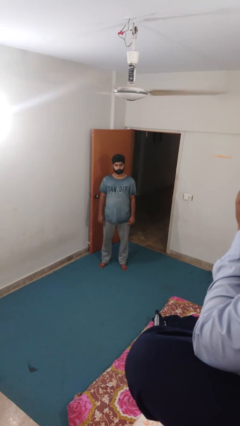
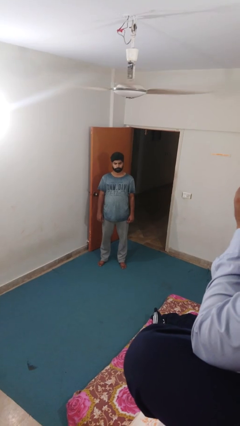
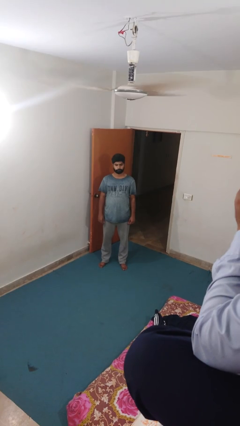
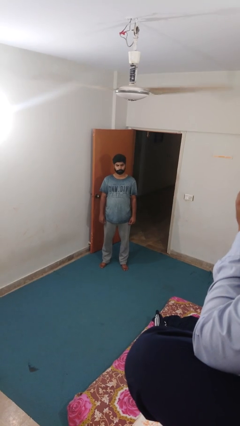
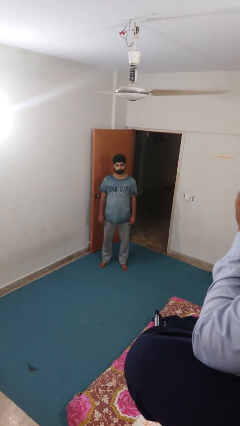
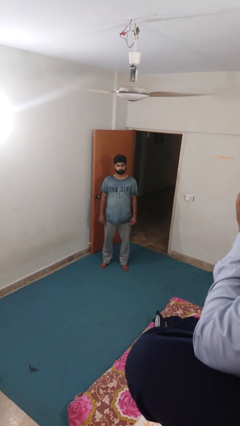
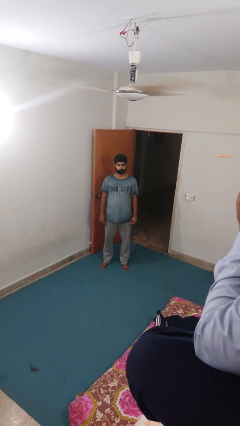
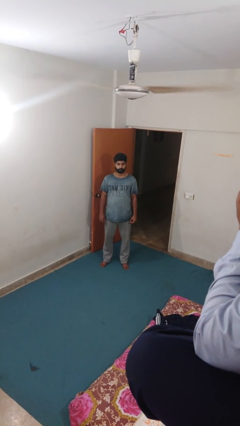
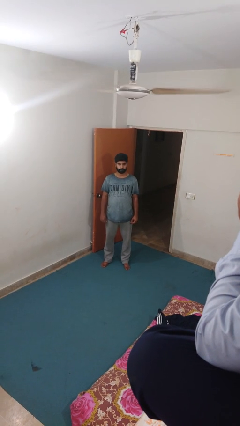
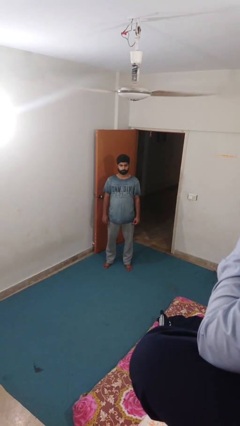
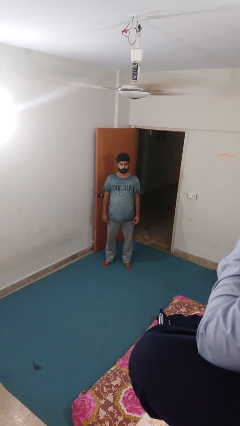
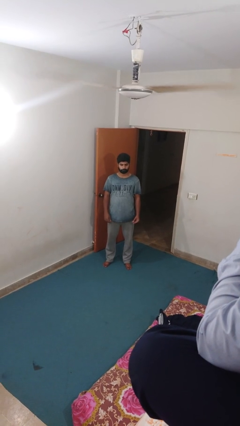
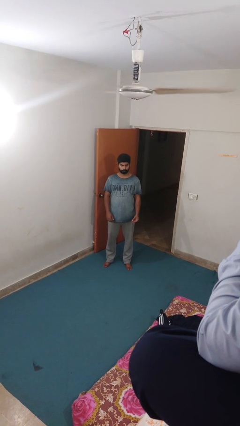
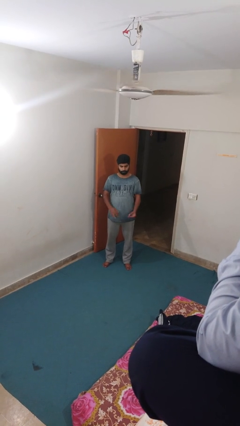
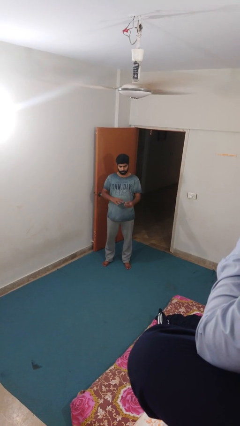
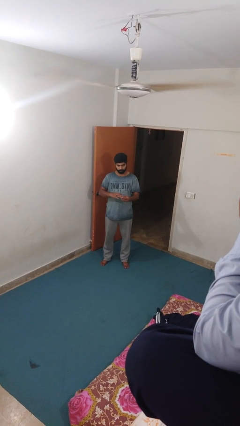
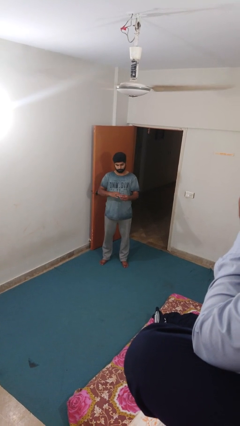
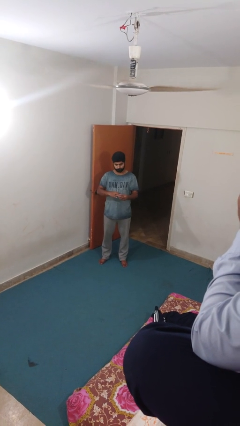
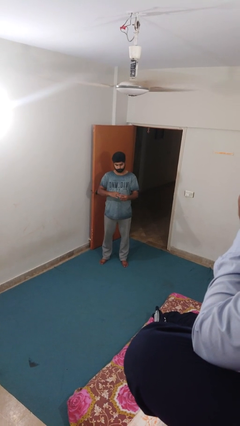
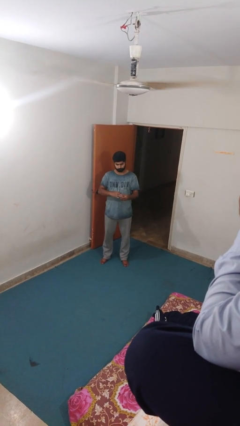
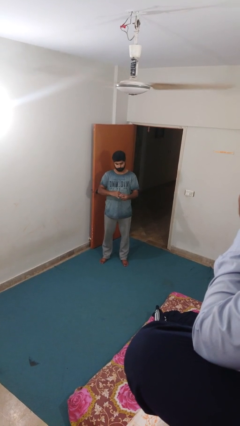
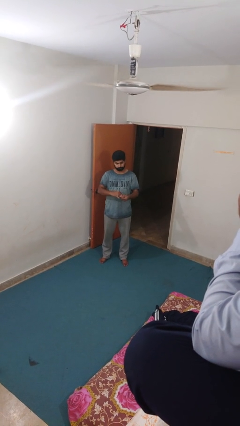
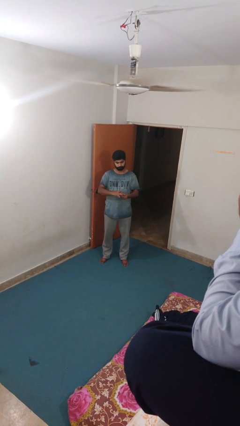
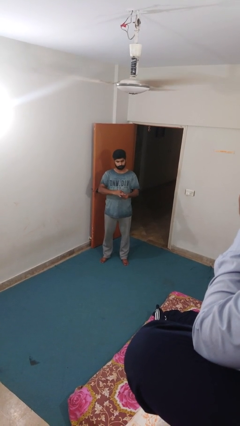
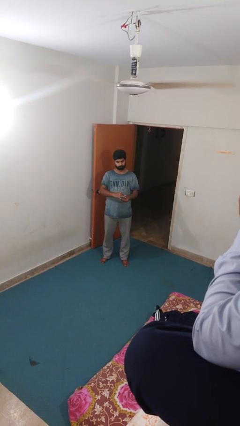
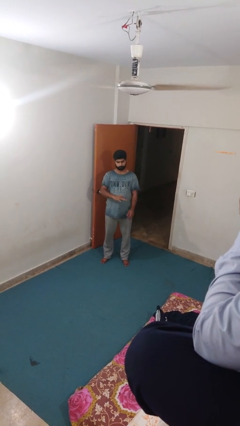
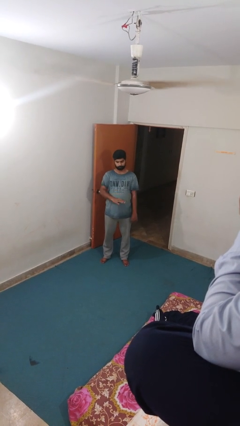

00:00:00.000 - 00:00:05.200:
person puts on ring

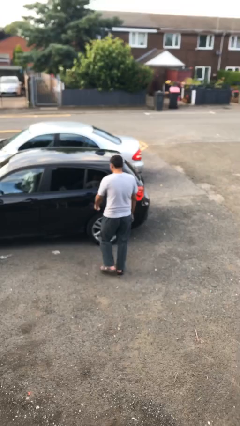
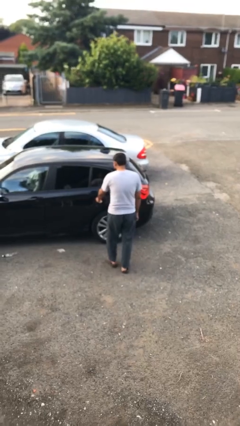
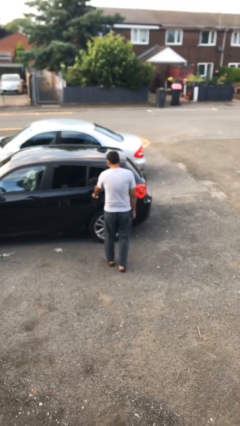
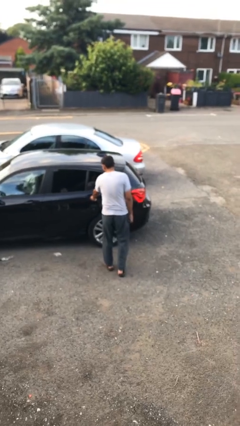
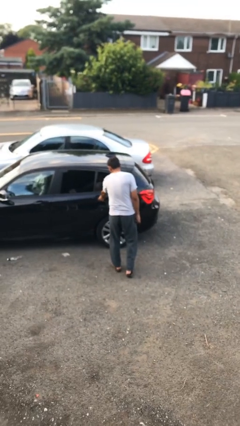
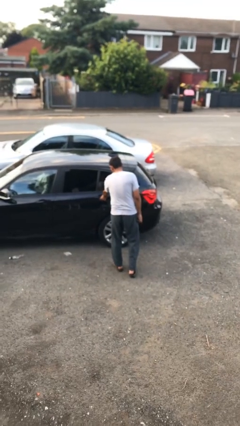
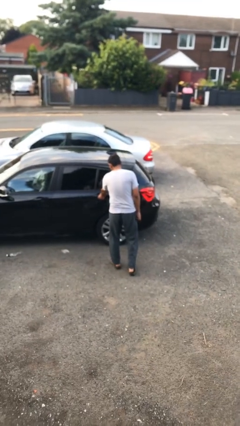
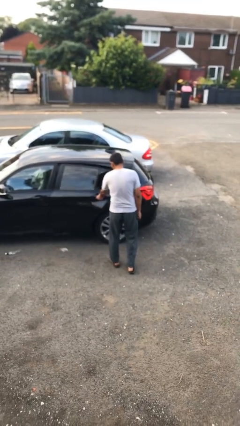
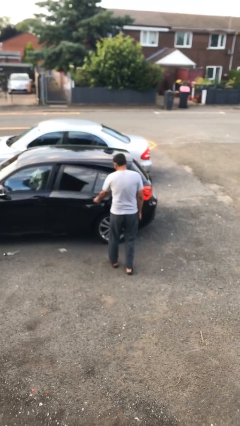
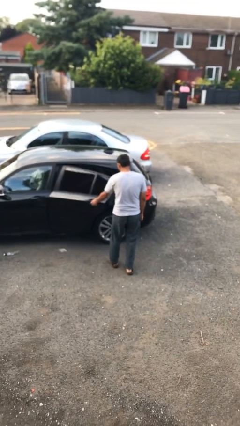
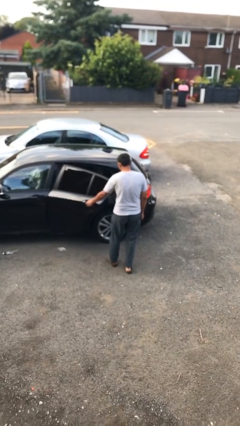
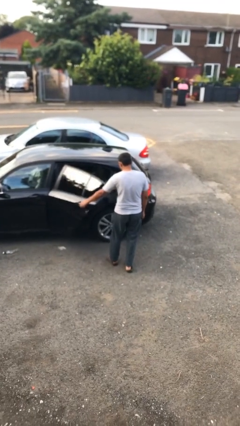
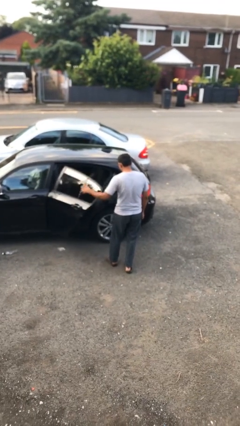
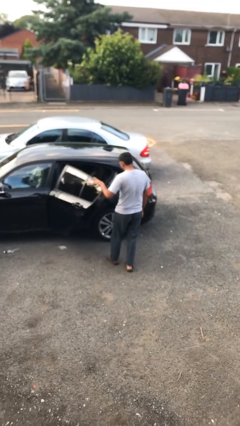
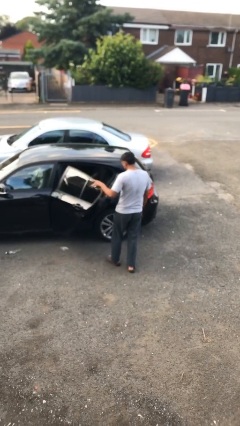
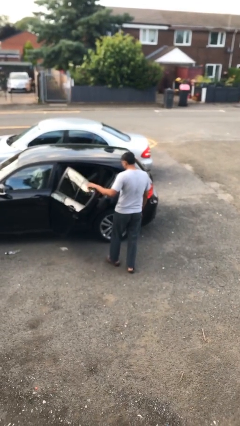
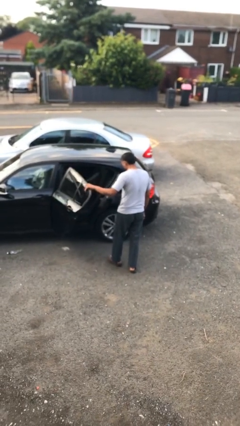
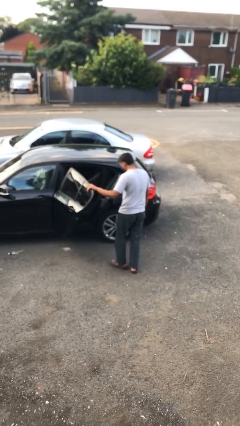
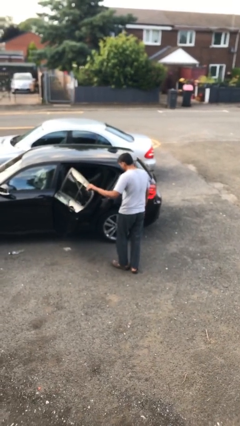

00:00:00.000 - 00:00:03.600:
person opens car door

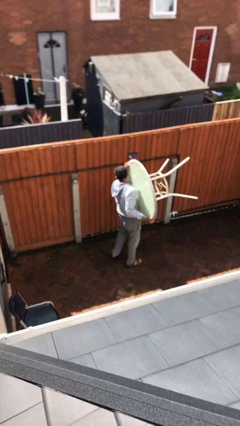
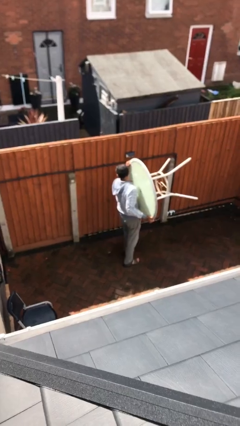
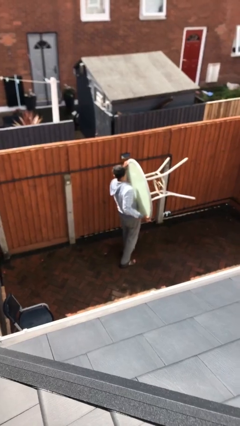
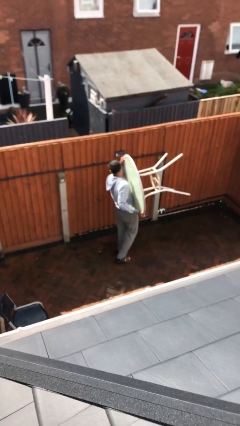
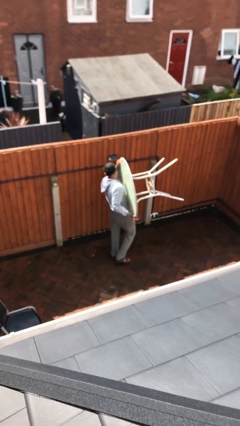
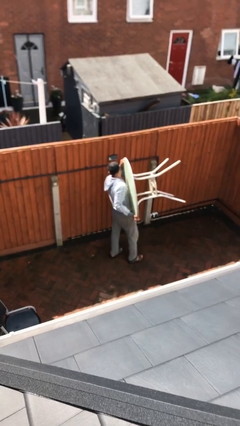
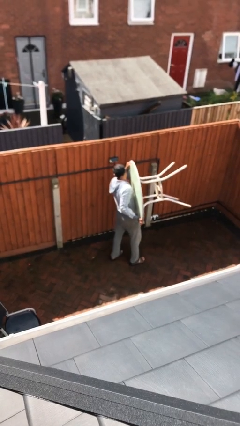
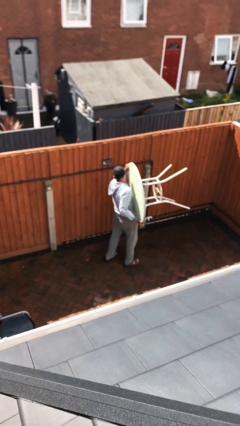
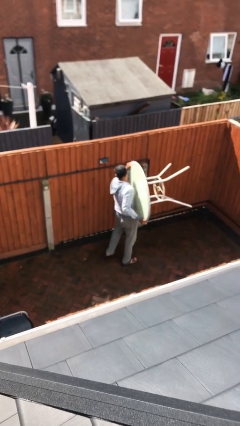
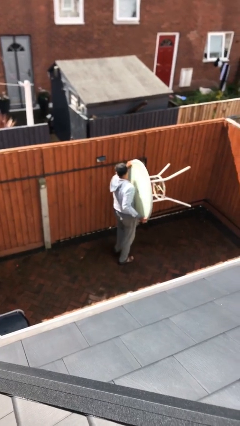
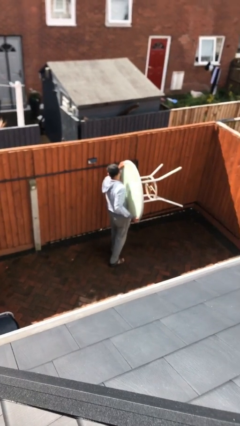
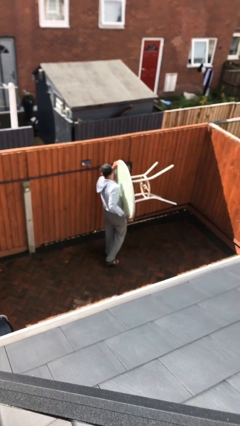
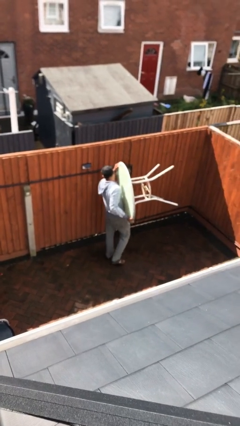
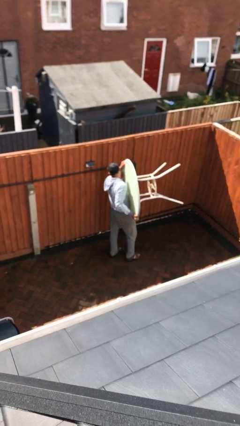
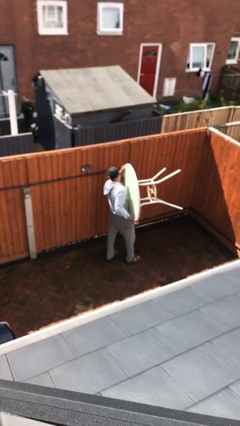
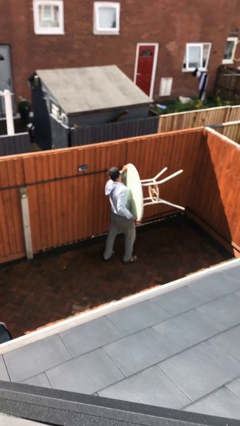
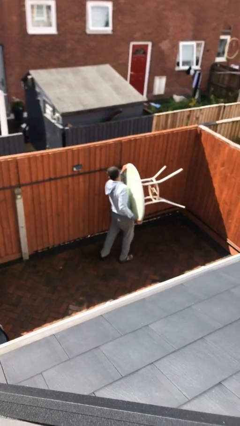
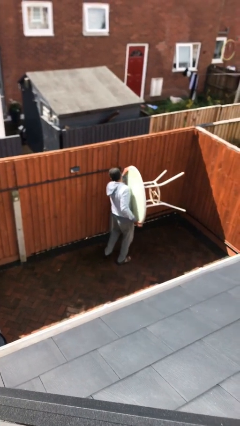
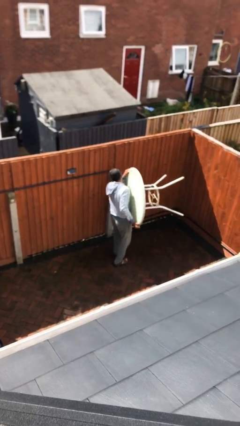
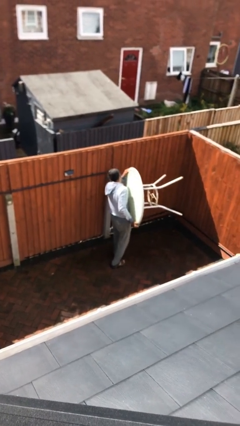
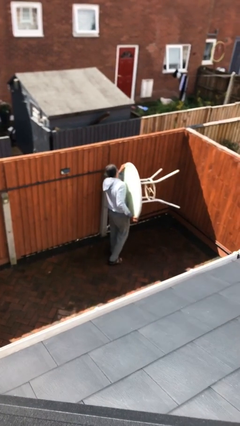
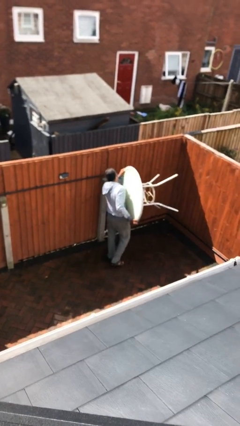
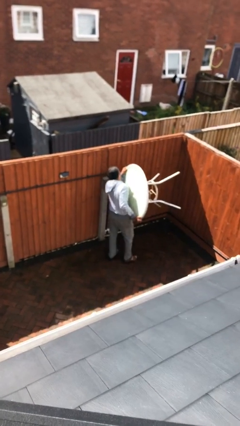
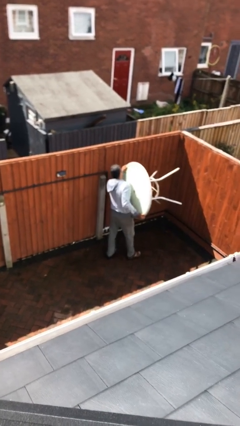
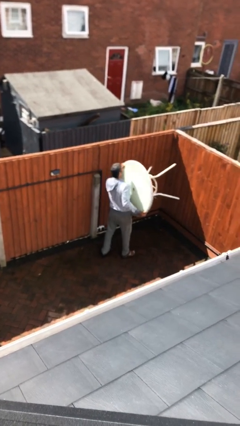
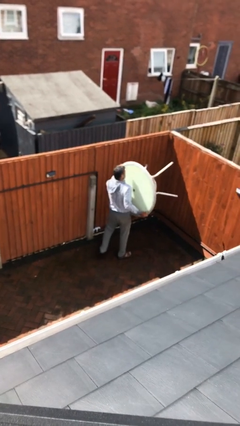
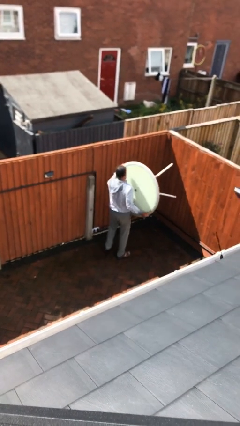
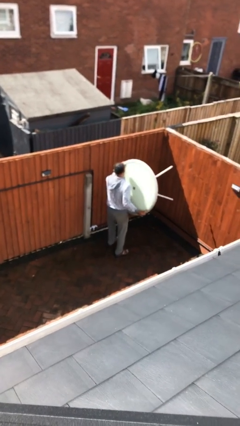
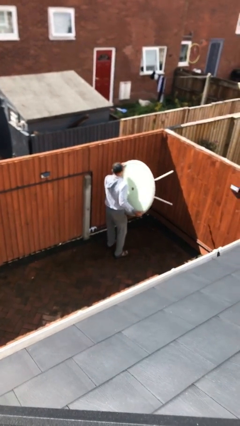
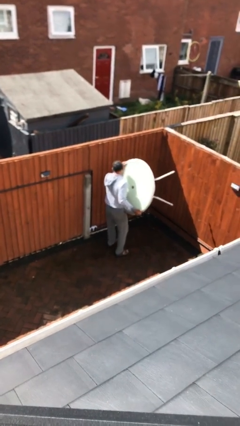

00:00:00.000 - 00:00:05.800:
person carries heavy object

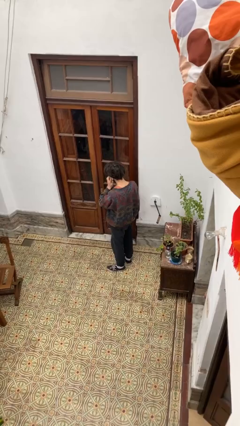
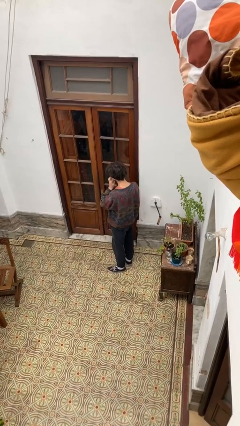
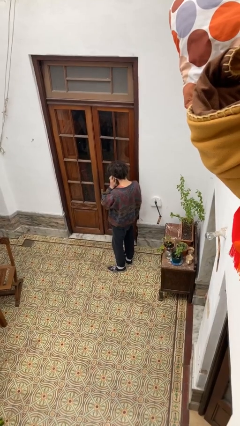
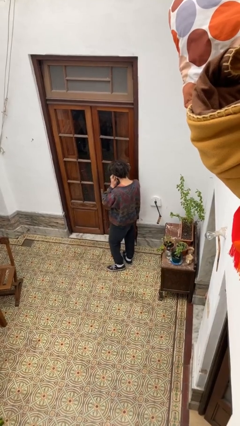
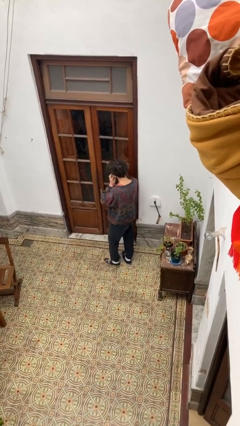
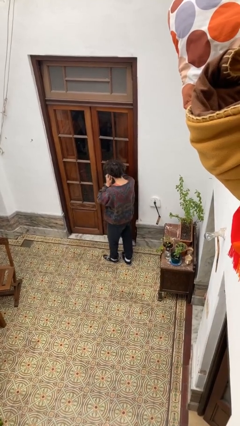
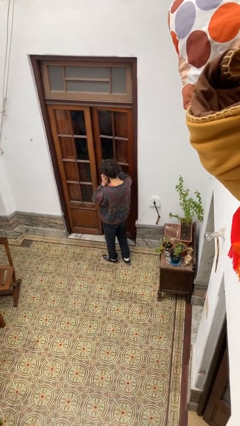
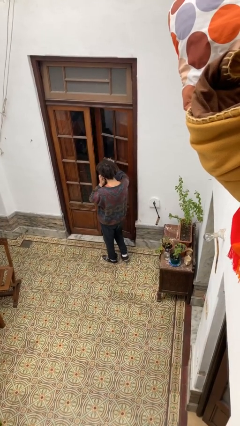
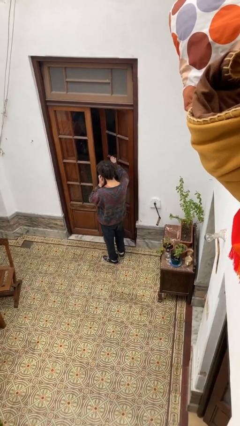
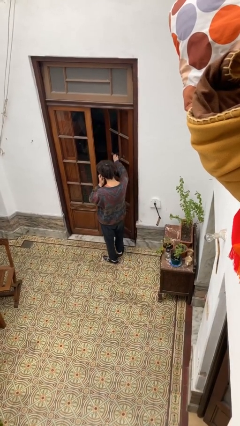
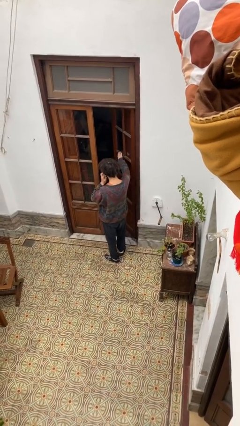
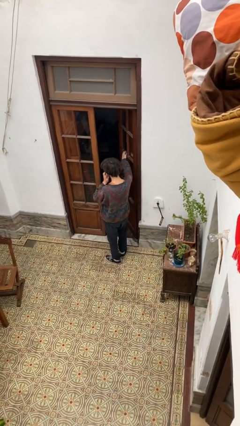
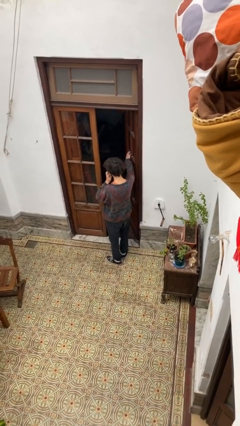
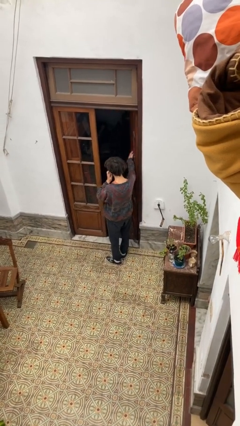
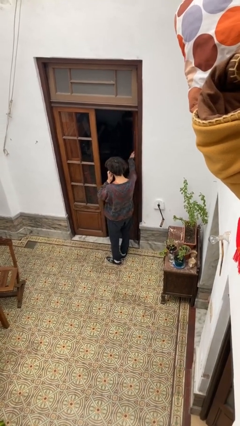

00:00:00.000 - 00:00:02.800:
person opens facility door

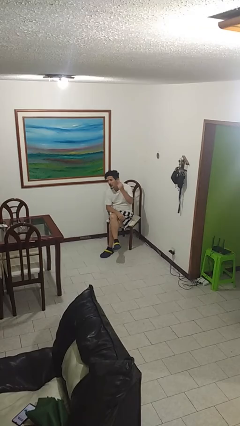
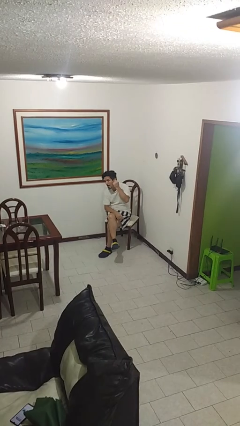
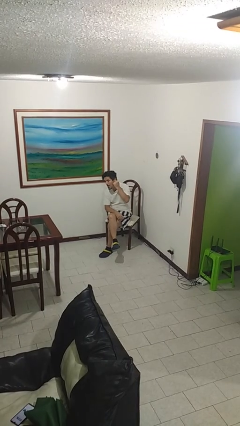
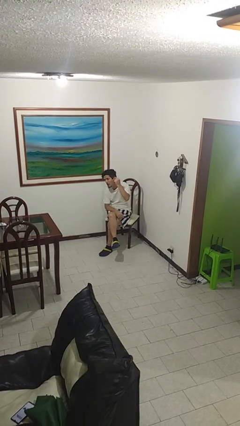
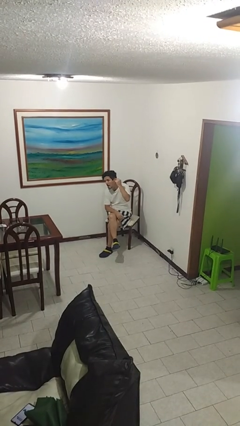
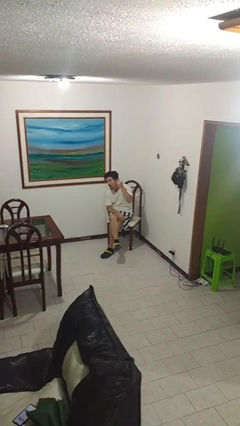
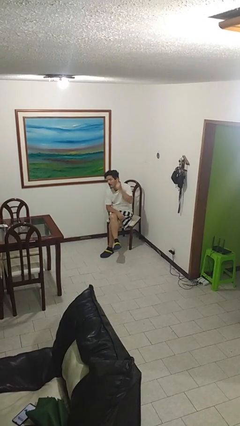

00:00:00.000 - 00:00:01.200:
person gestures listen closely
